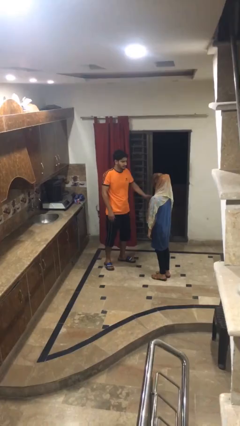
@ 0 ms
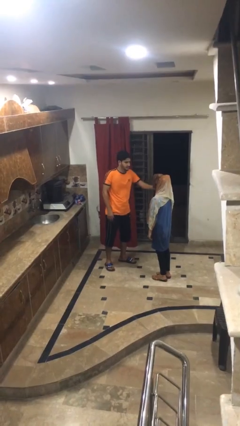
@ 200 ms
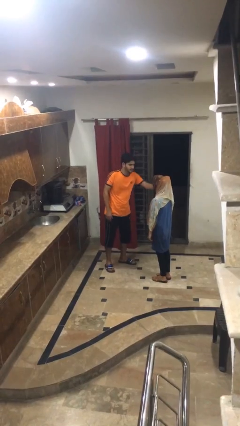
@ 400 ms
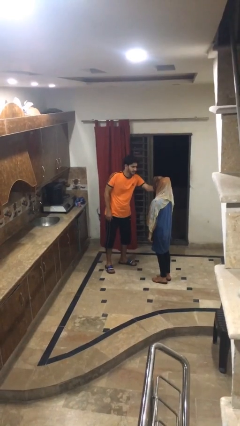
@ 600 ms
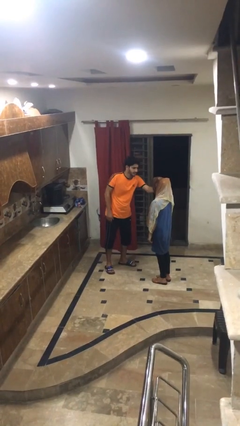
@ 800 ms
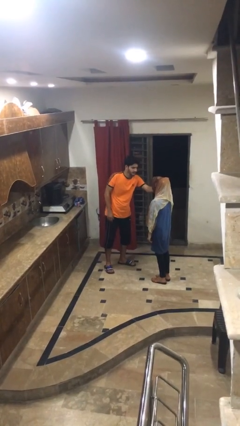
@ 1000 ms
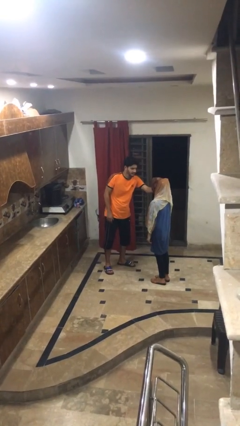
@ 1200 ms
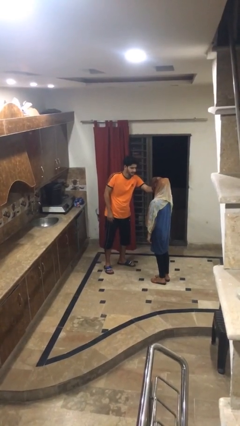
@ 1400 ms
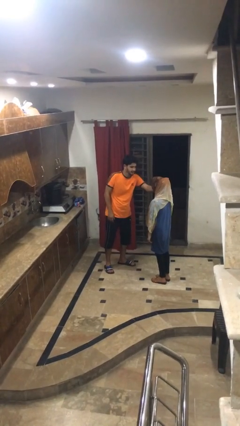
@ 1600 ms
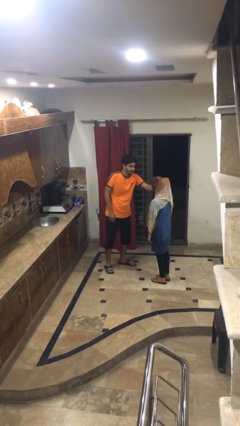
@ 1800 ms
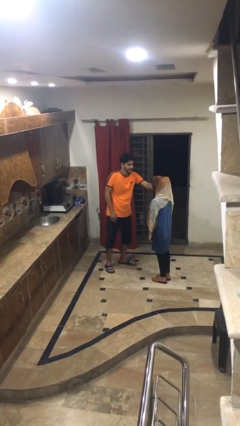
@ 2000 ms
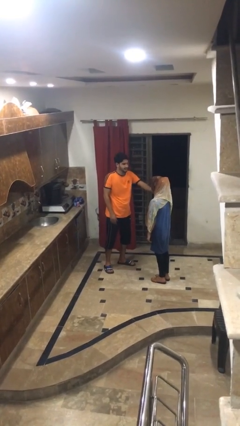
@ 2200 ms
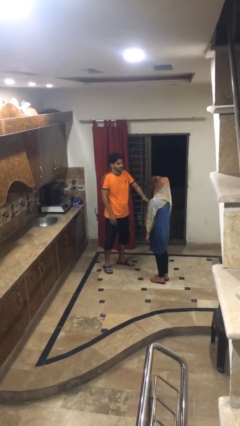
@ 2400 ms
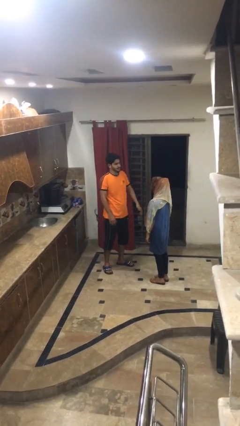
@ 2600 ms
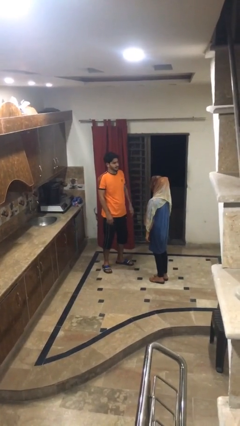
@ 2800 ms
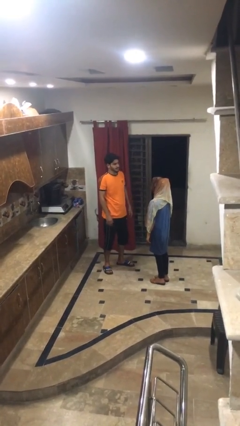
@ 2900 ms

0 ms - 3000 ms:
person touches face of person

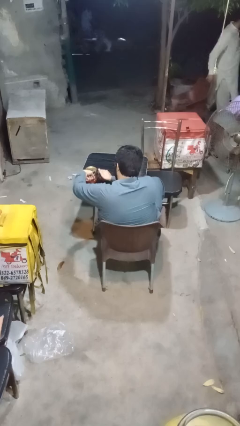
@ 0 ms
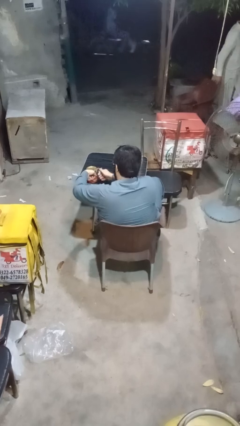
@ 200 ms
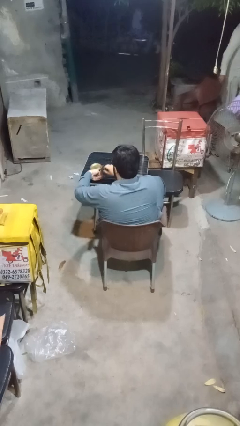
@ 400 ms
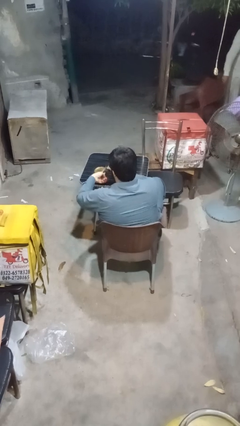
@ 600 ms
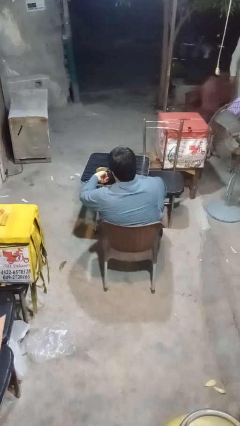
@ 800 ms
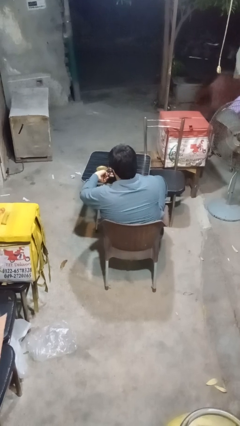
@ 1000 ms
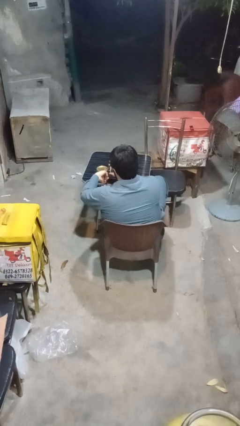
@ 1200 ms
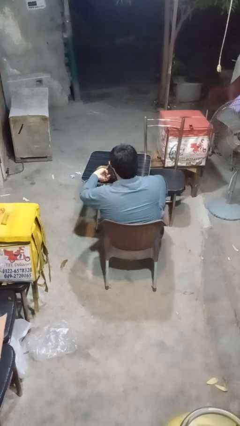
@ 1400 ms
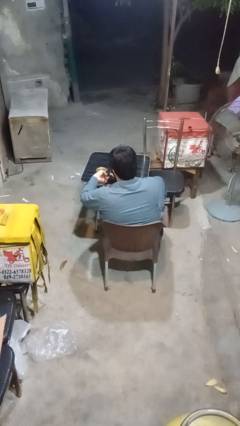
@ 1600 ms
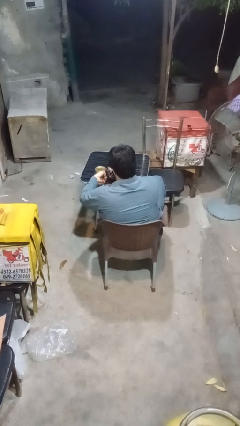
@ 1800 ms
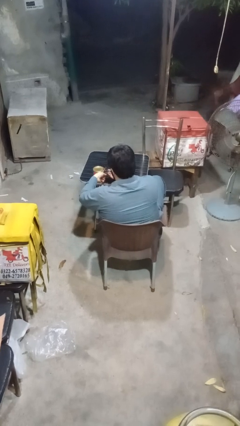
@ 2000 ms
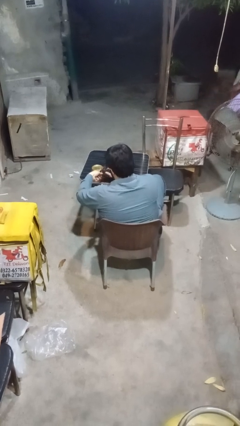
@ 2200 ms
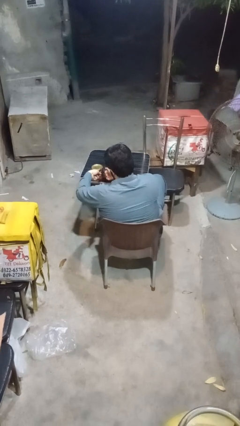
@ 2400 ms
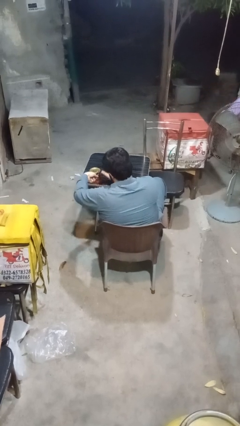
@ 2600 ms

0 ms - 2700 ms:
person opens can with can opener

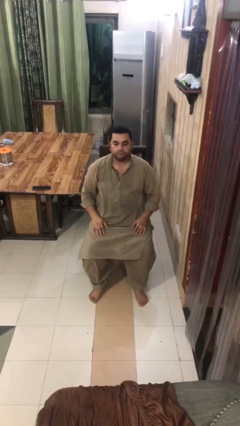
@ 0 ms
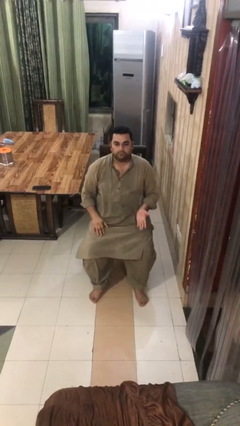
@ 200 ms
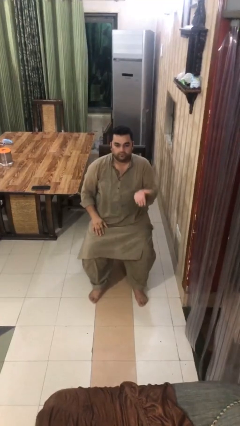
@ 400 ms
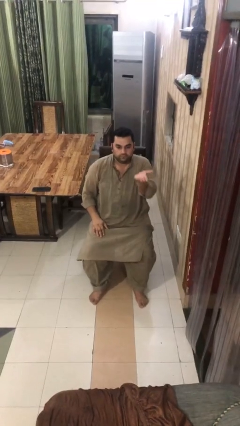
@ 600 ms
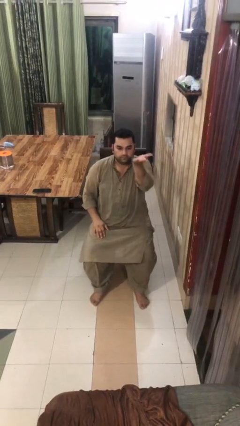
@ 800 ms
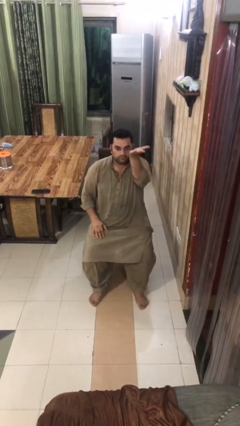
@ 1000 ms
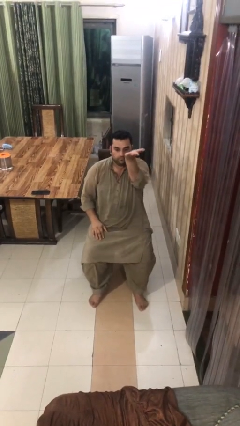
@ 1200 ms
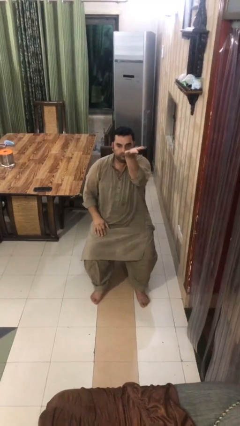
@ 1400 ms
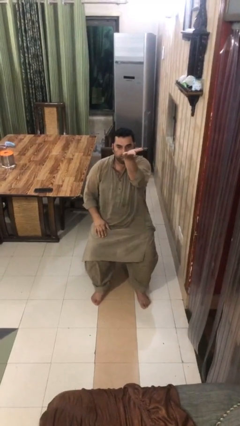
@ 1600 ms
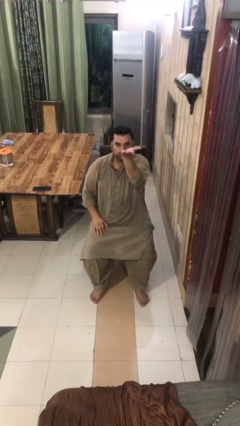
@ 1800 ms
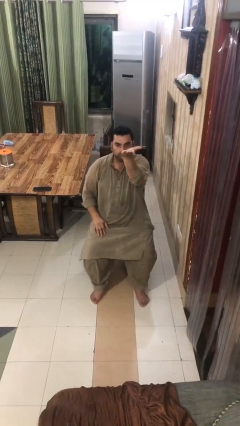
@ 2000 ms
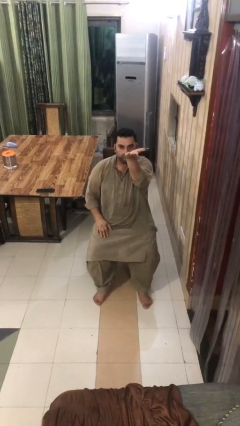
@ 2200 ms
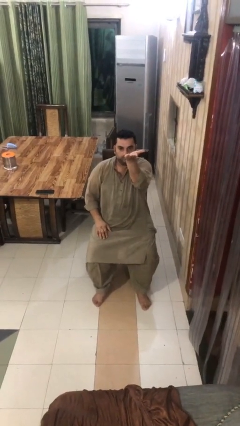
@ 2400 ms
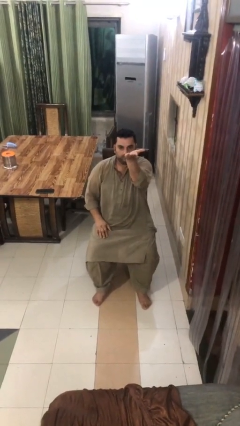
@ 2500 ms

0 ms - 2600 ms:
person gestures swipe up

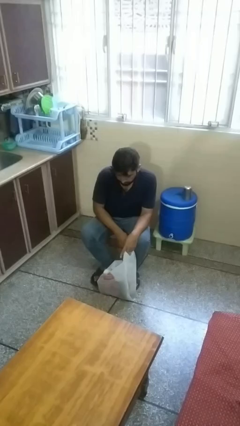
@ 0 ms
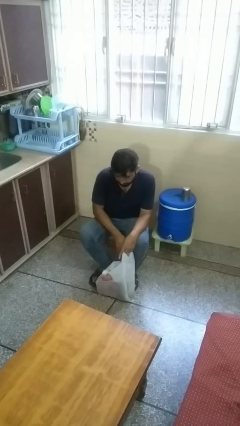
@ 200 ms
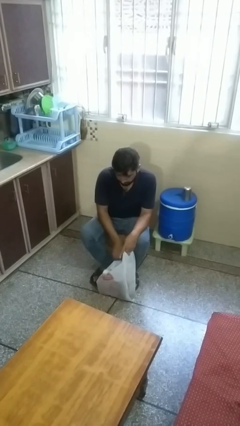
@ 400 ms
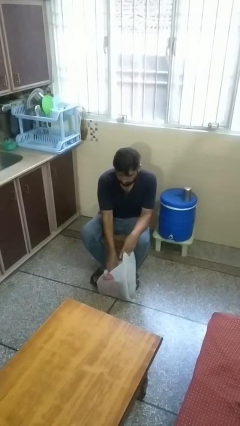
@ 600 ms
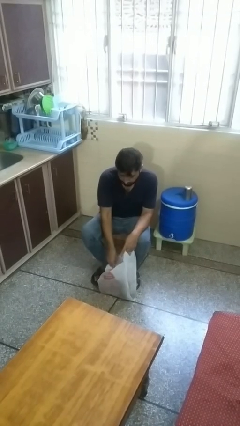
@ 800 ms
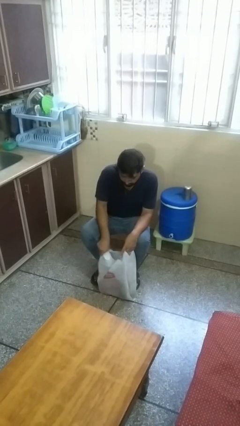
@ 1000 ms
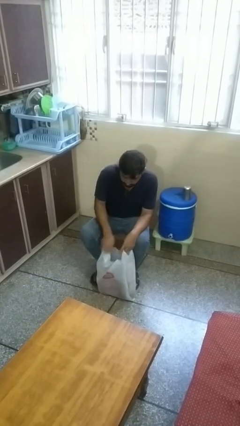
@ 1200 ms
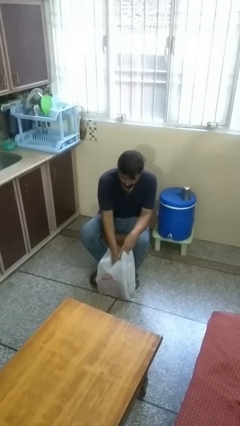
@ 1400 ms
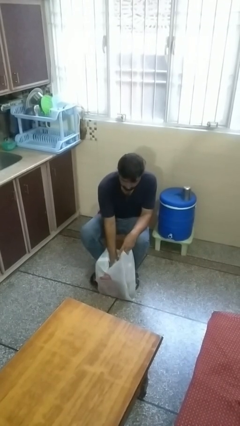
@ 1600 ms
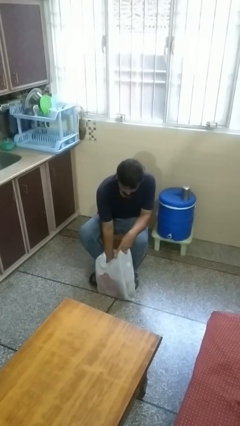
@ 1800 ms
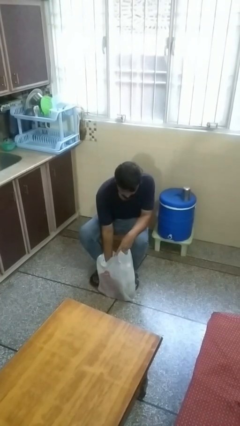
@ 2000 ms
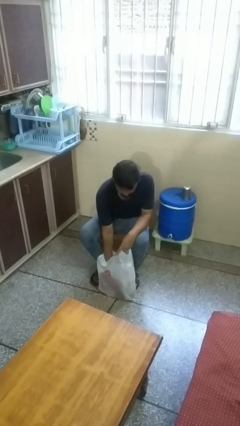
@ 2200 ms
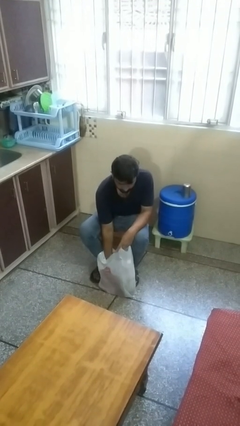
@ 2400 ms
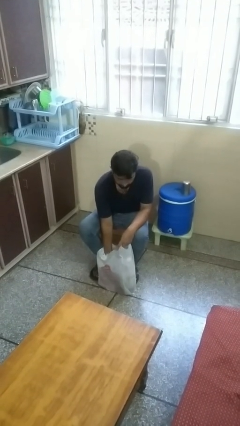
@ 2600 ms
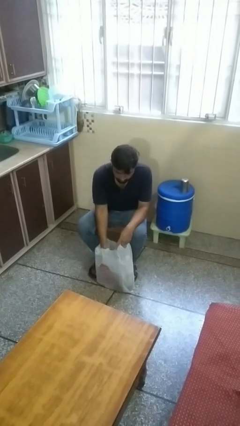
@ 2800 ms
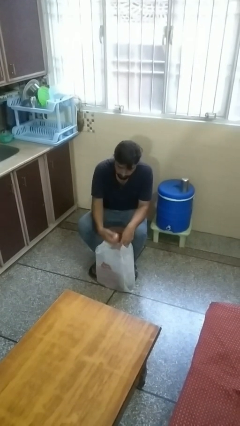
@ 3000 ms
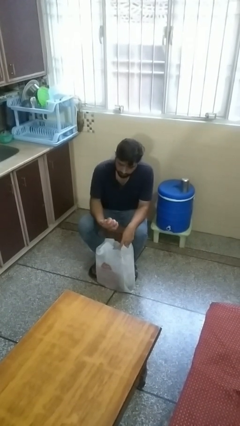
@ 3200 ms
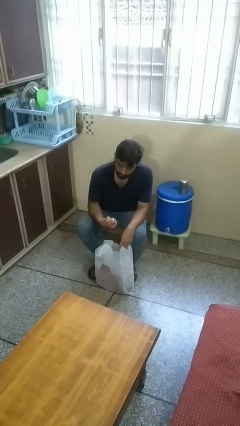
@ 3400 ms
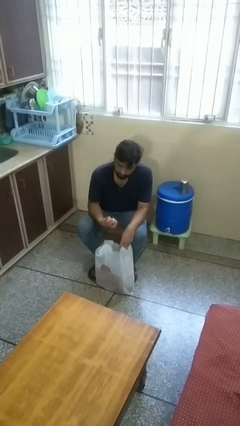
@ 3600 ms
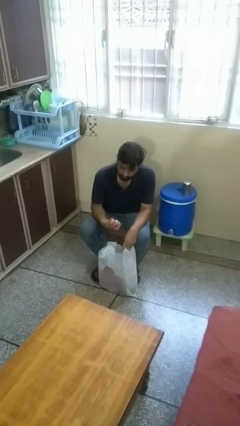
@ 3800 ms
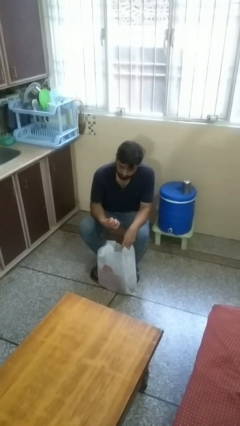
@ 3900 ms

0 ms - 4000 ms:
person takes object from bag

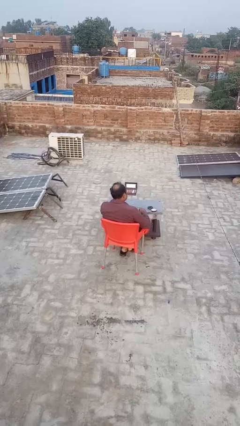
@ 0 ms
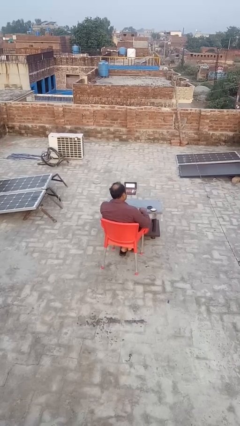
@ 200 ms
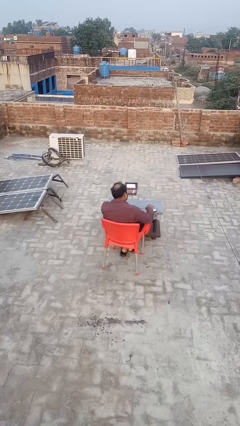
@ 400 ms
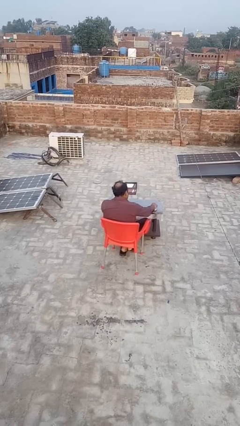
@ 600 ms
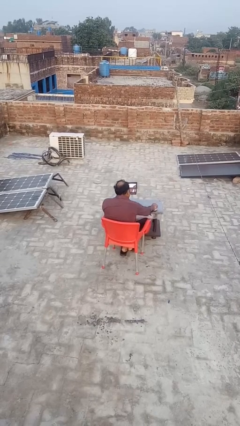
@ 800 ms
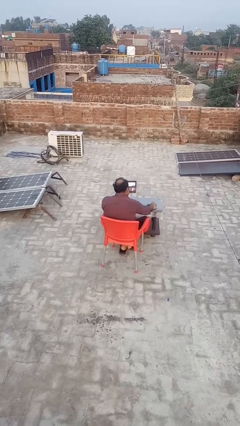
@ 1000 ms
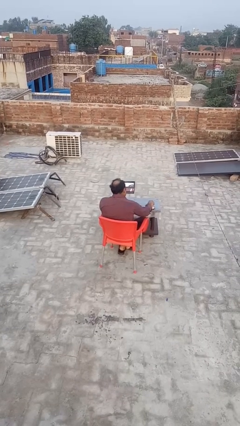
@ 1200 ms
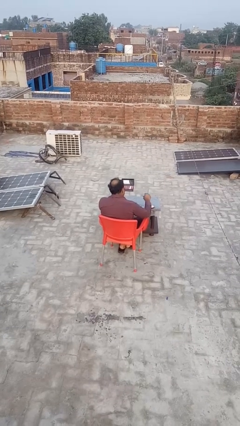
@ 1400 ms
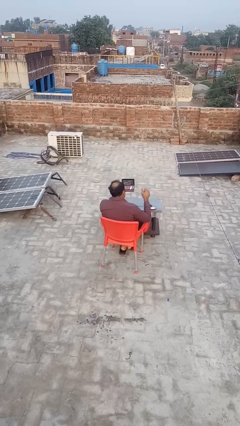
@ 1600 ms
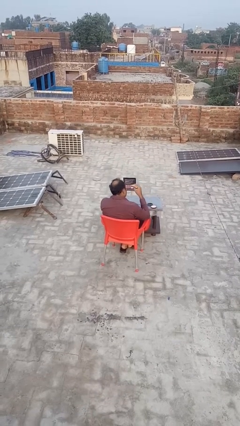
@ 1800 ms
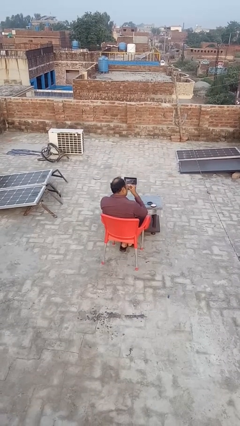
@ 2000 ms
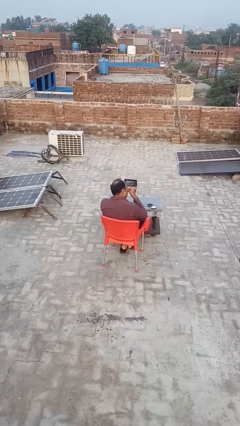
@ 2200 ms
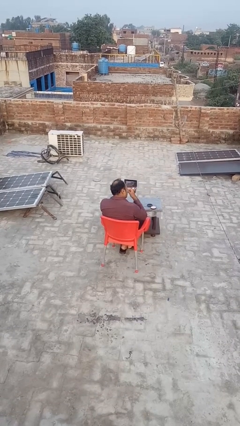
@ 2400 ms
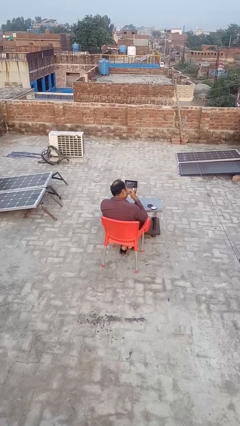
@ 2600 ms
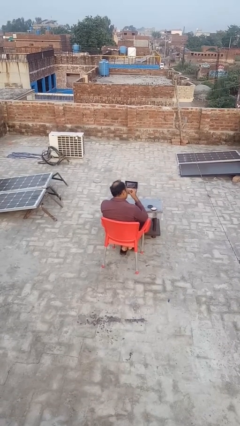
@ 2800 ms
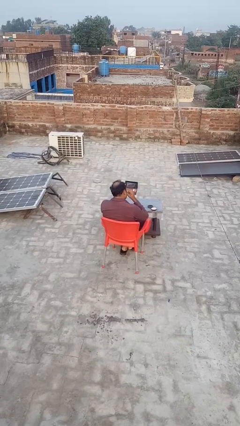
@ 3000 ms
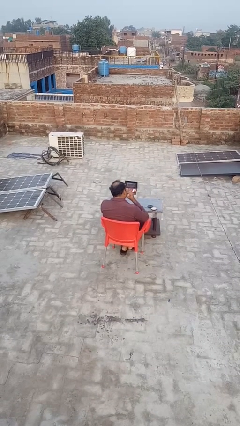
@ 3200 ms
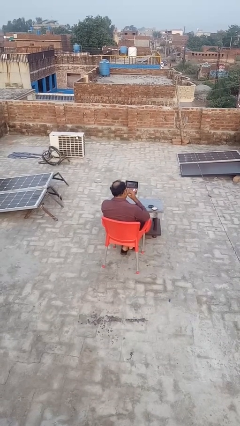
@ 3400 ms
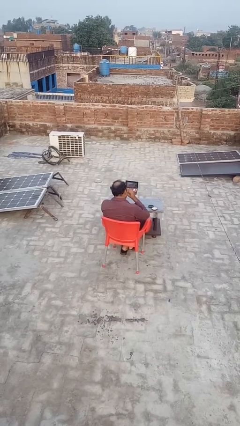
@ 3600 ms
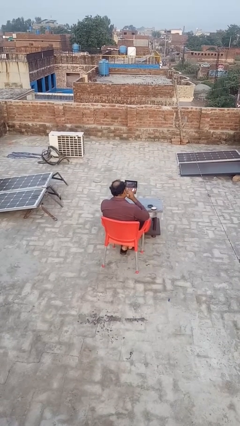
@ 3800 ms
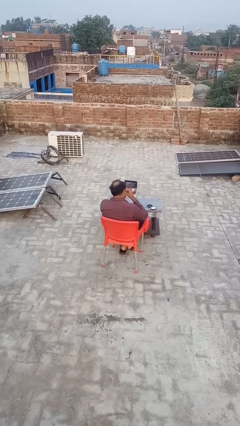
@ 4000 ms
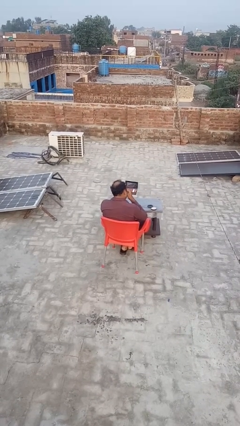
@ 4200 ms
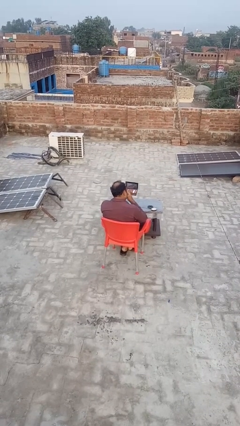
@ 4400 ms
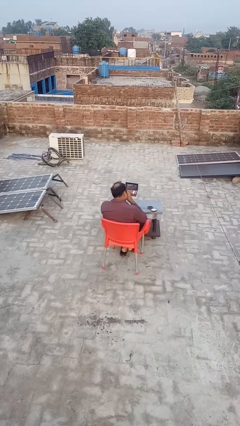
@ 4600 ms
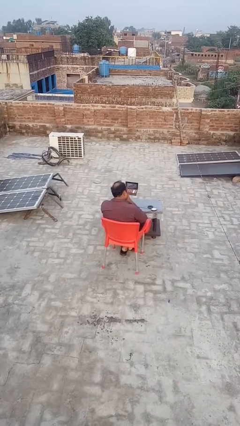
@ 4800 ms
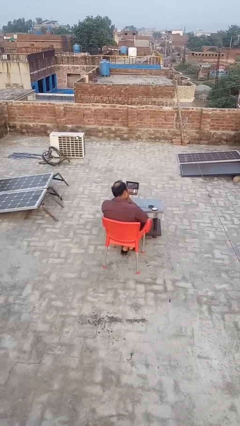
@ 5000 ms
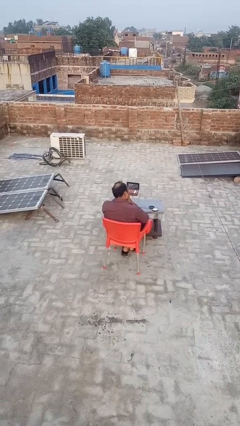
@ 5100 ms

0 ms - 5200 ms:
person applies foundation makeup
